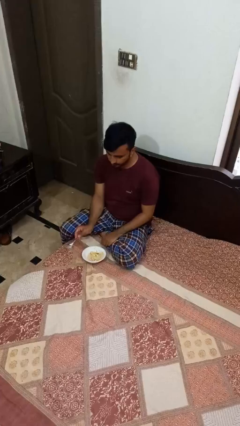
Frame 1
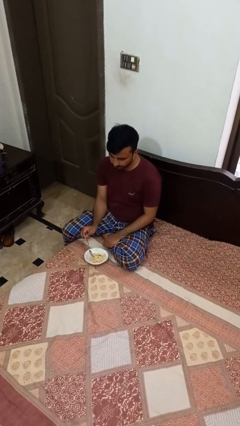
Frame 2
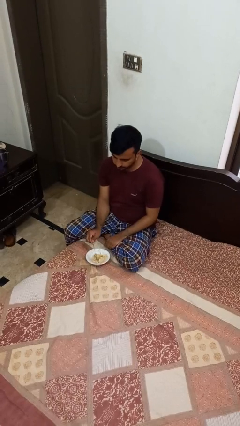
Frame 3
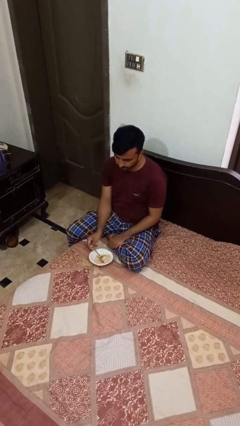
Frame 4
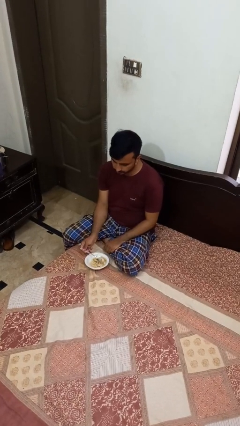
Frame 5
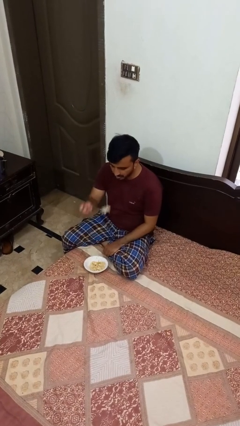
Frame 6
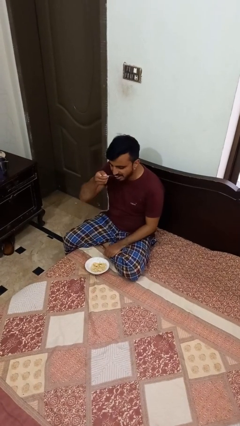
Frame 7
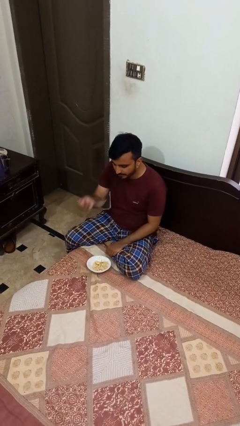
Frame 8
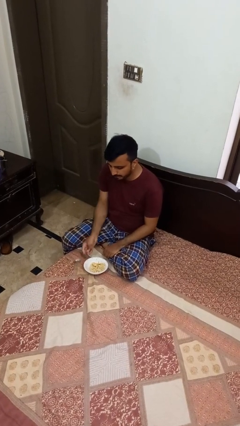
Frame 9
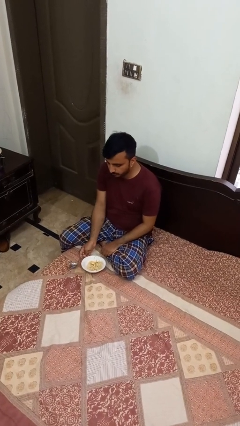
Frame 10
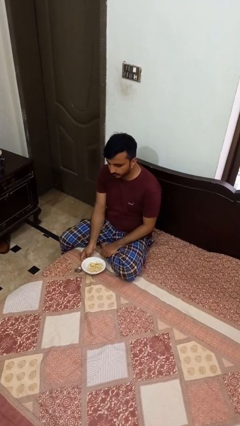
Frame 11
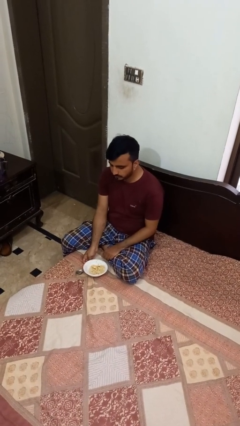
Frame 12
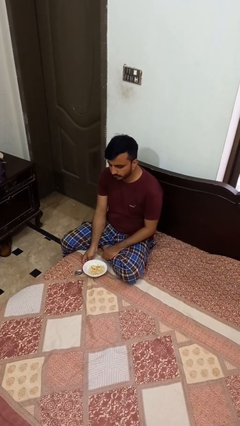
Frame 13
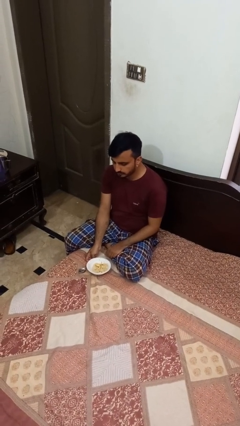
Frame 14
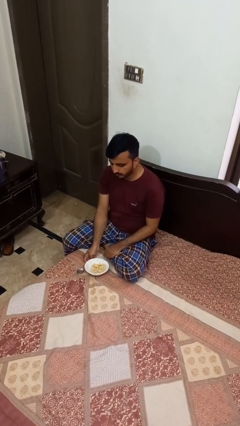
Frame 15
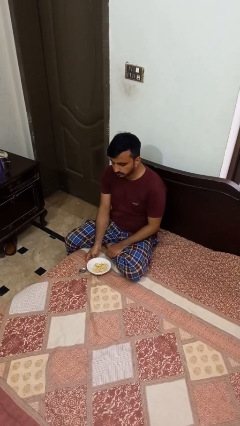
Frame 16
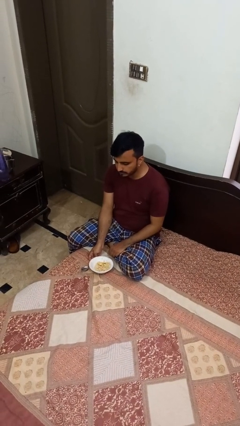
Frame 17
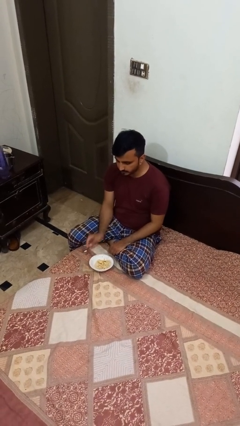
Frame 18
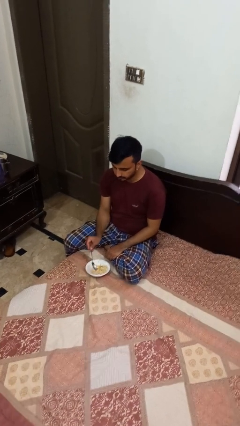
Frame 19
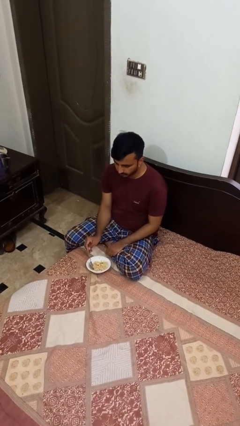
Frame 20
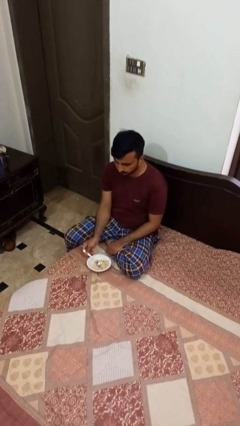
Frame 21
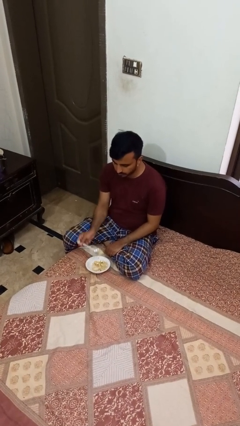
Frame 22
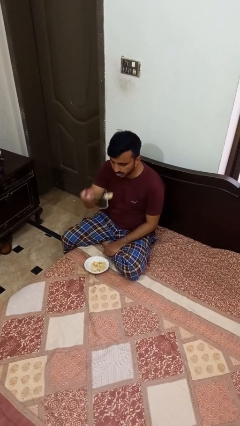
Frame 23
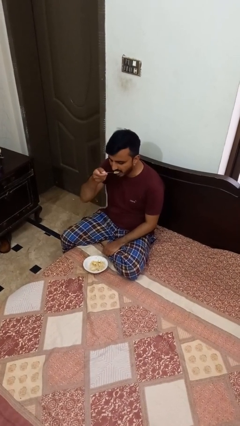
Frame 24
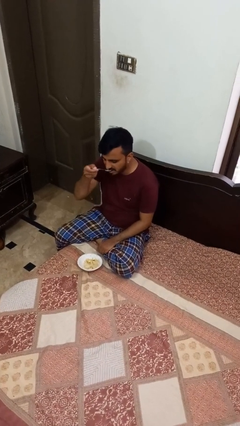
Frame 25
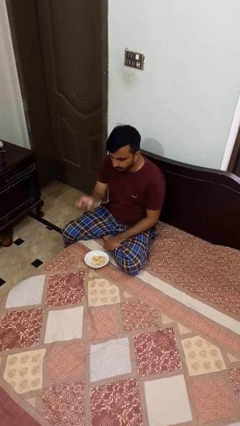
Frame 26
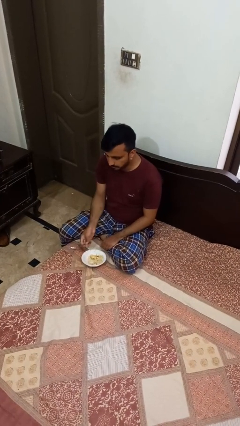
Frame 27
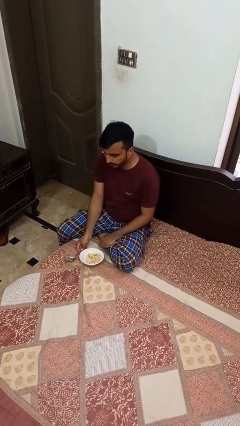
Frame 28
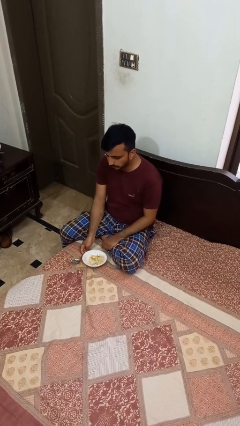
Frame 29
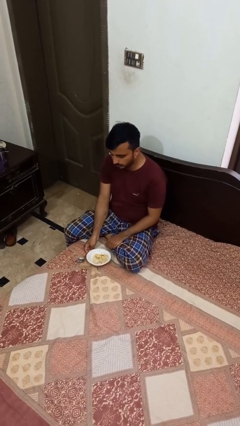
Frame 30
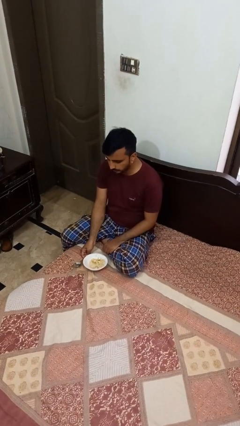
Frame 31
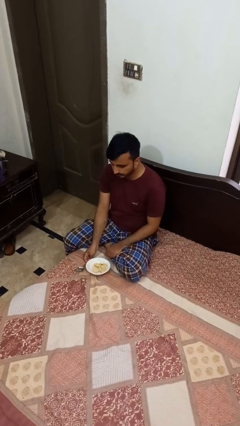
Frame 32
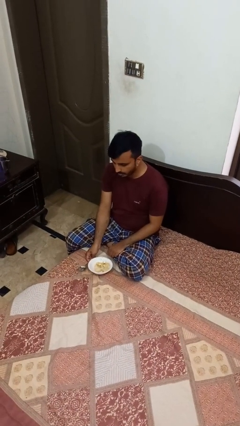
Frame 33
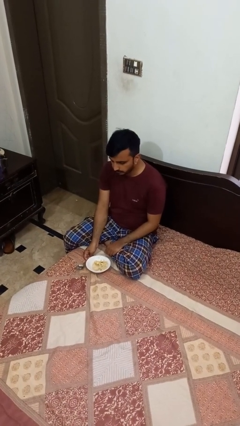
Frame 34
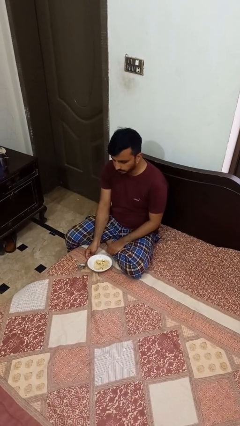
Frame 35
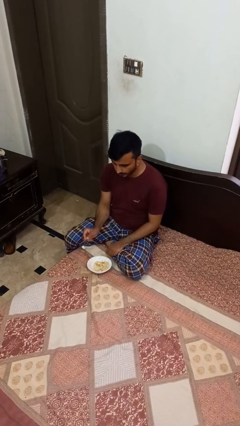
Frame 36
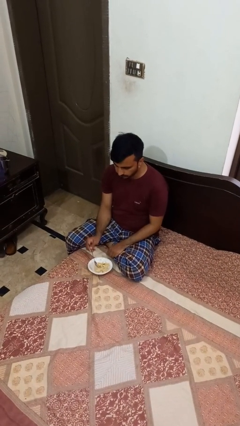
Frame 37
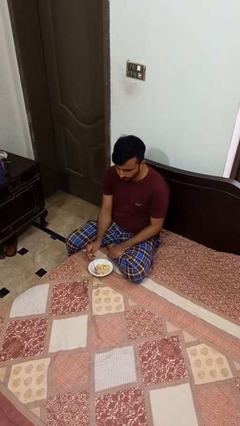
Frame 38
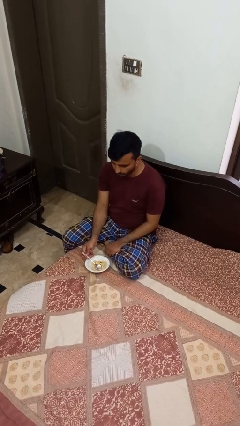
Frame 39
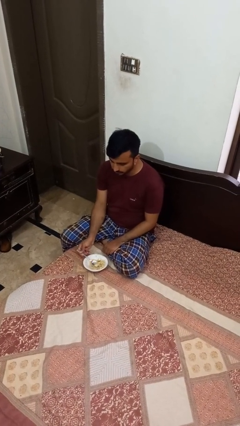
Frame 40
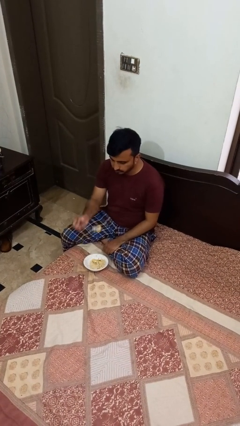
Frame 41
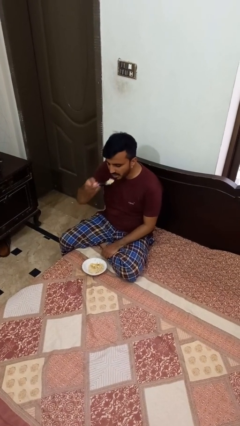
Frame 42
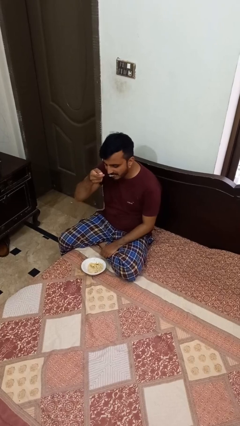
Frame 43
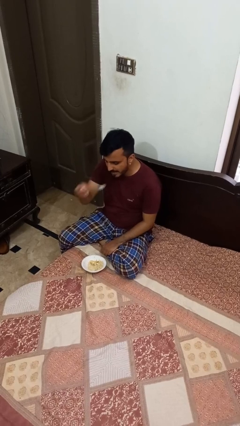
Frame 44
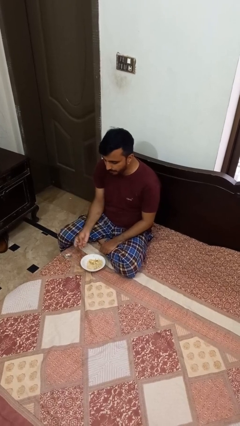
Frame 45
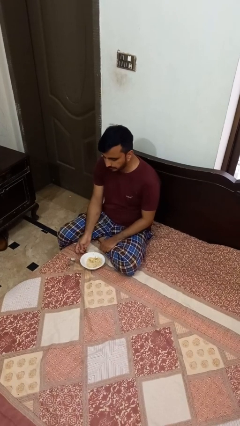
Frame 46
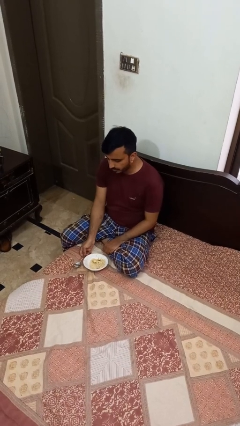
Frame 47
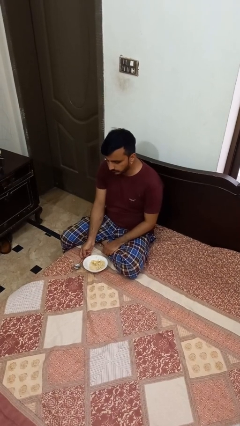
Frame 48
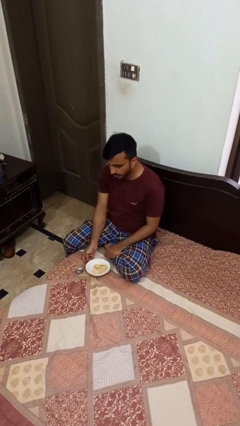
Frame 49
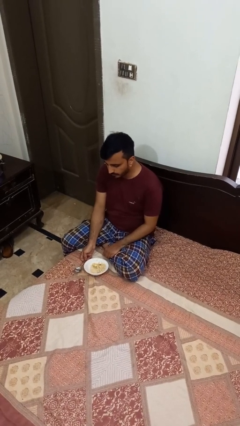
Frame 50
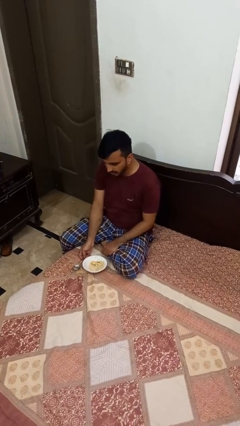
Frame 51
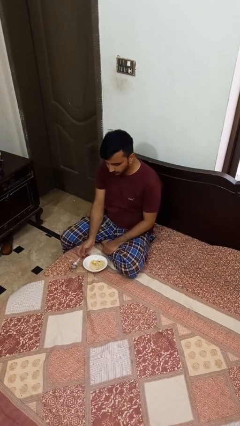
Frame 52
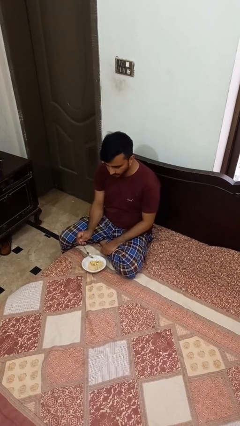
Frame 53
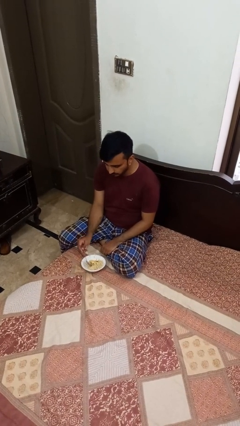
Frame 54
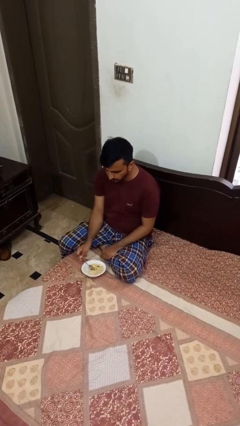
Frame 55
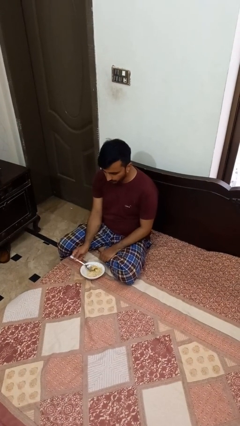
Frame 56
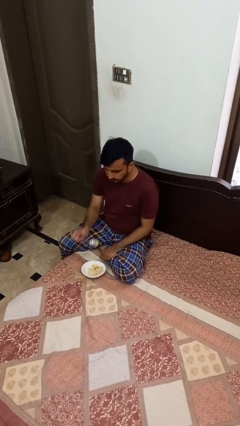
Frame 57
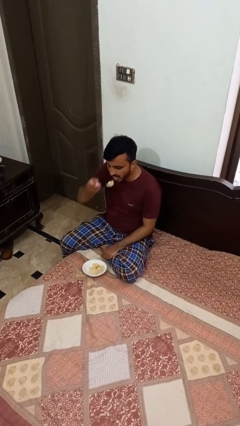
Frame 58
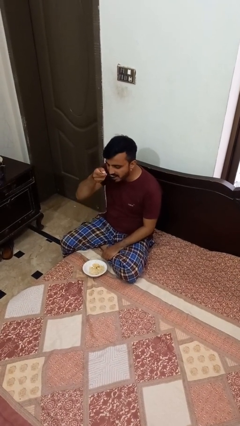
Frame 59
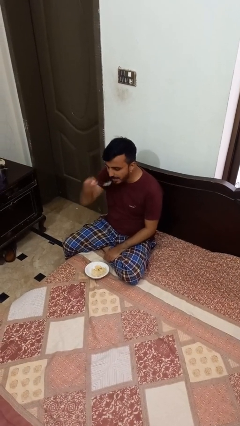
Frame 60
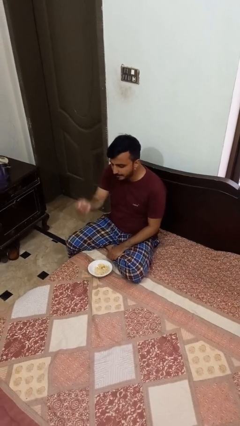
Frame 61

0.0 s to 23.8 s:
person eats with utensil

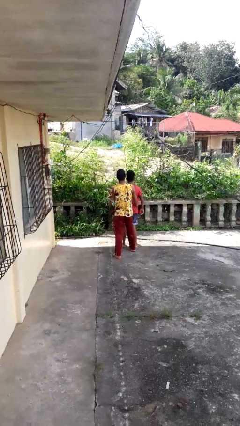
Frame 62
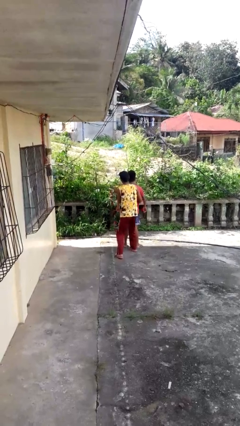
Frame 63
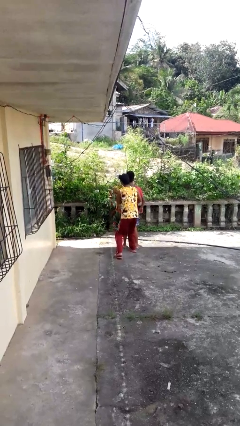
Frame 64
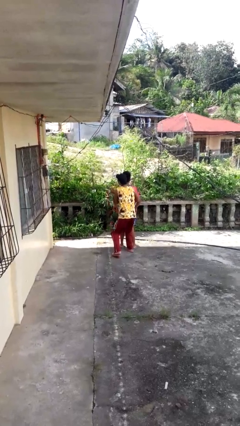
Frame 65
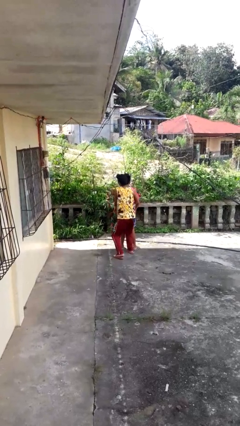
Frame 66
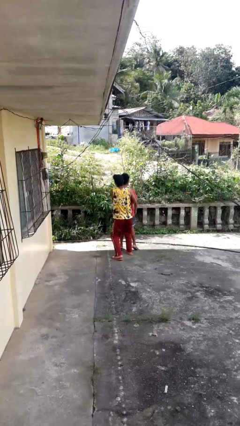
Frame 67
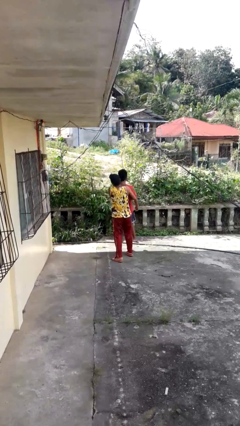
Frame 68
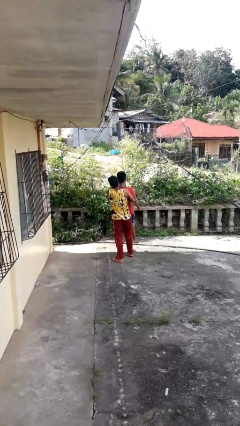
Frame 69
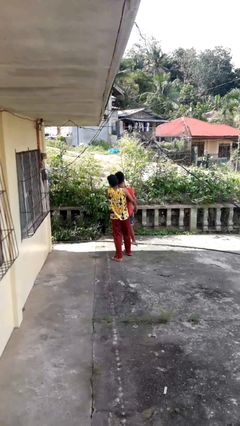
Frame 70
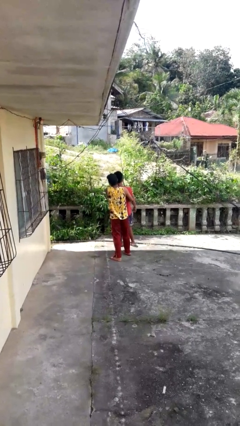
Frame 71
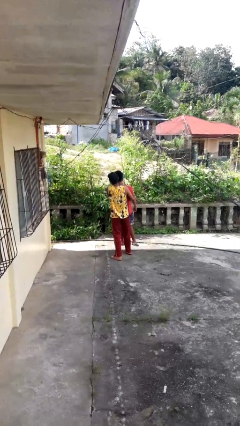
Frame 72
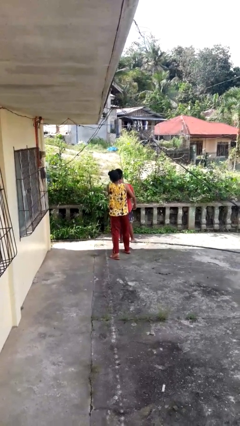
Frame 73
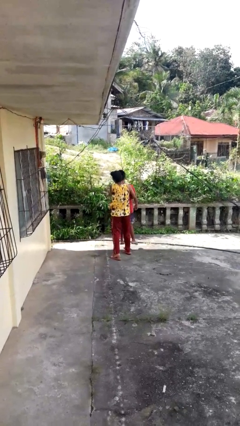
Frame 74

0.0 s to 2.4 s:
person picks up person

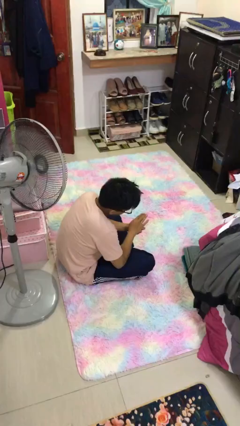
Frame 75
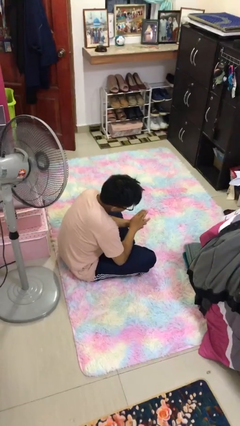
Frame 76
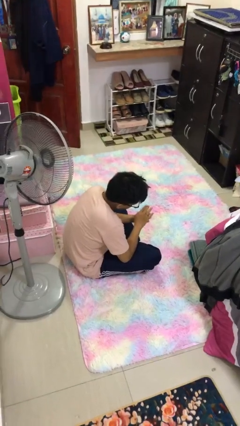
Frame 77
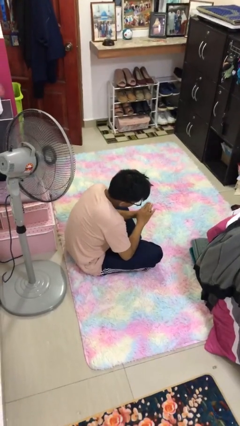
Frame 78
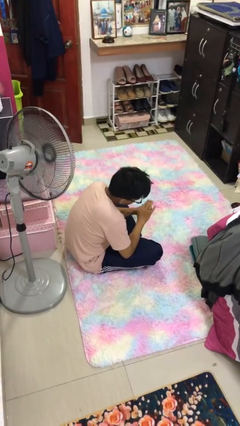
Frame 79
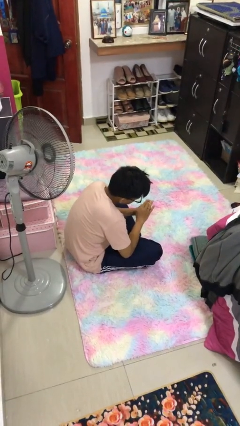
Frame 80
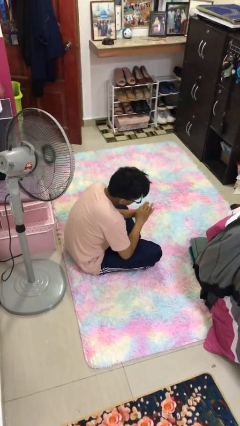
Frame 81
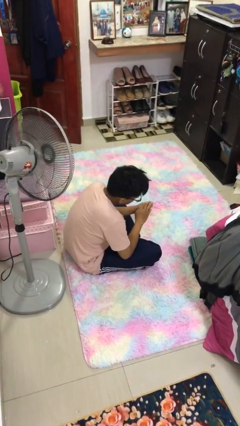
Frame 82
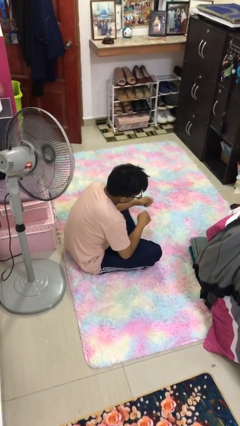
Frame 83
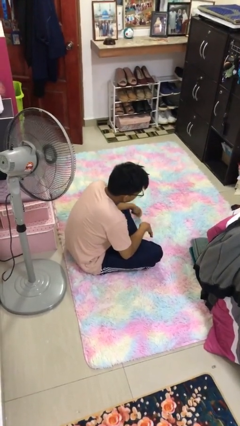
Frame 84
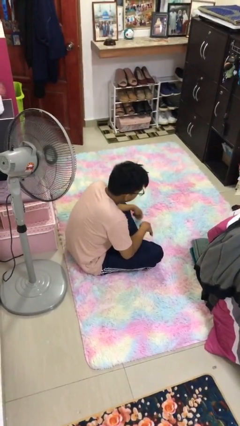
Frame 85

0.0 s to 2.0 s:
person takes off ring

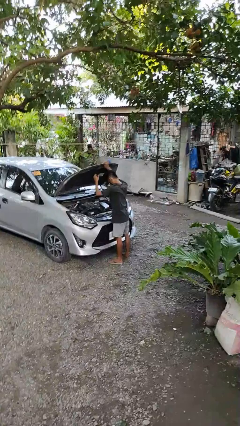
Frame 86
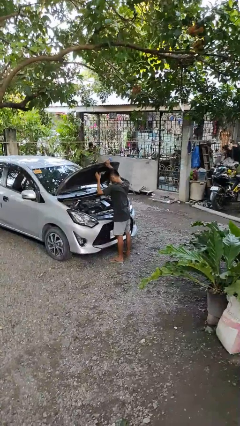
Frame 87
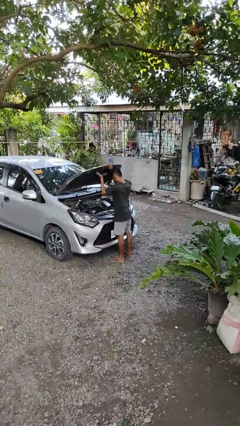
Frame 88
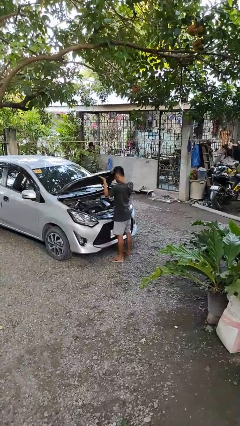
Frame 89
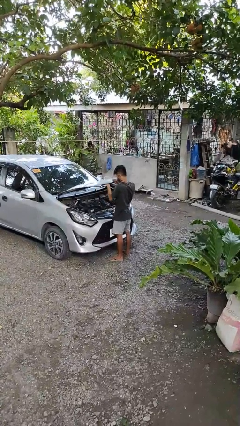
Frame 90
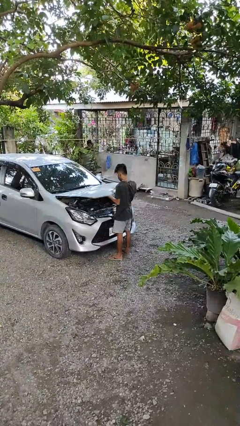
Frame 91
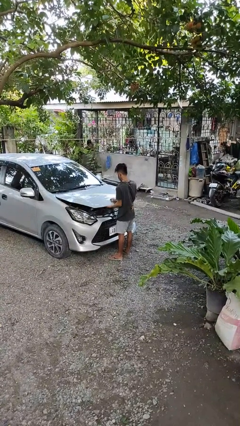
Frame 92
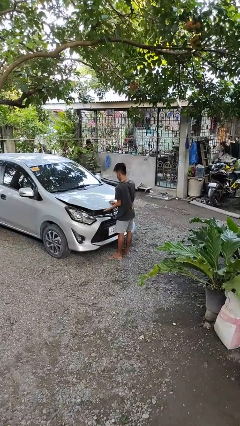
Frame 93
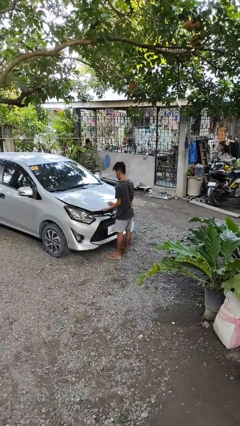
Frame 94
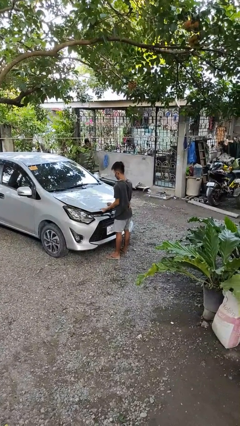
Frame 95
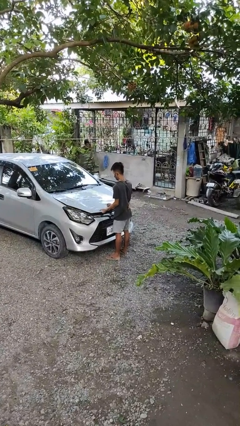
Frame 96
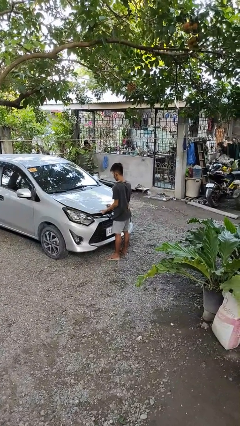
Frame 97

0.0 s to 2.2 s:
person closes car hood
